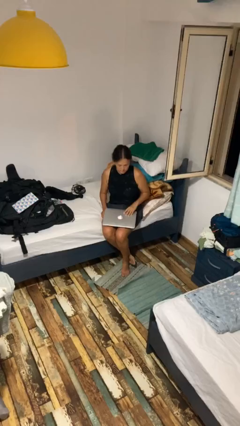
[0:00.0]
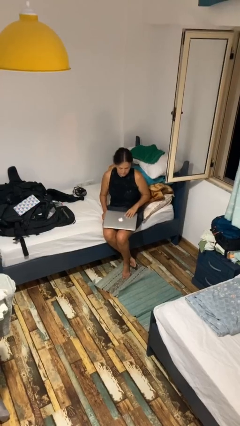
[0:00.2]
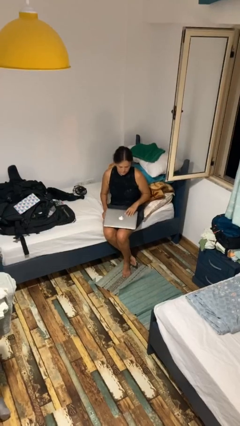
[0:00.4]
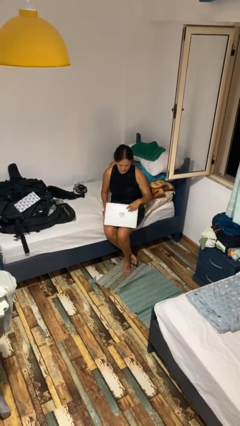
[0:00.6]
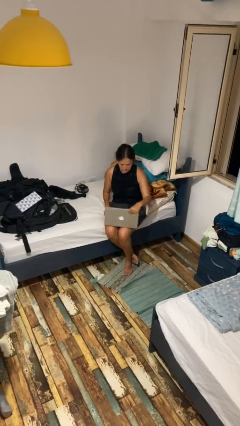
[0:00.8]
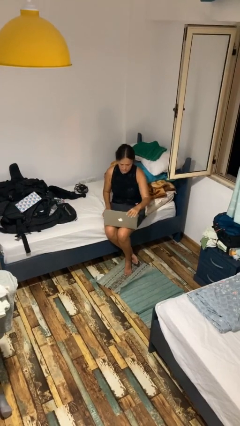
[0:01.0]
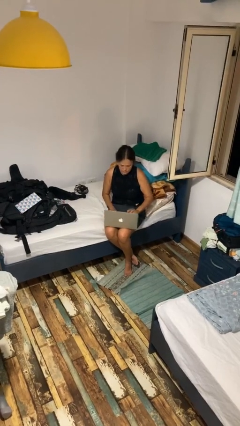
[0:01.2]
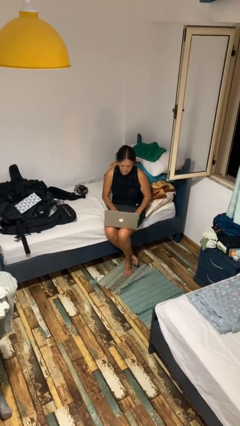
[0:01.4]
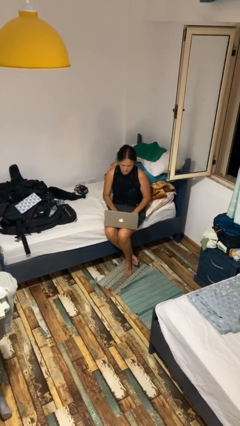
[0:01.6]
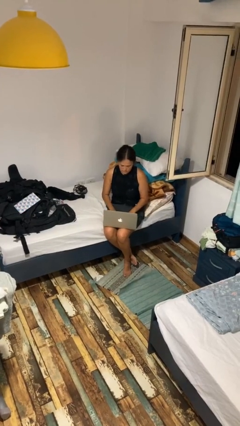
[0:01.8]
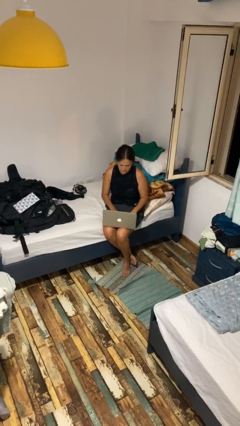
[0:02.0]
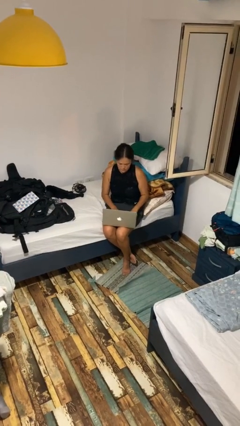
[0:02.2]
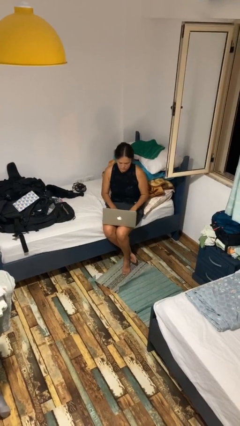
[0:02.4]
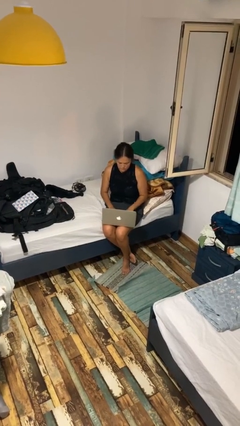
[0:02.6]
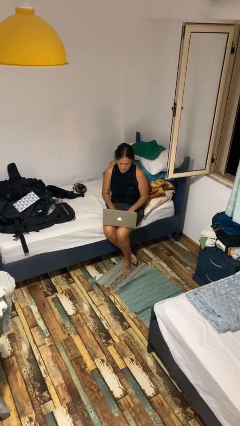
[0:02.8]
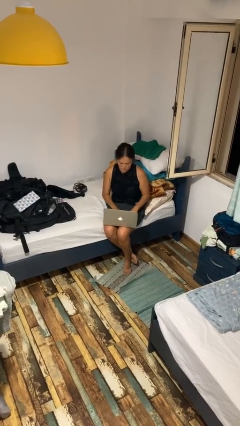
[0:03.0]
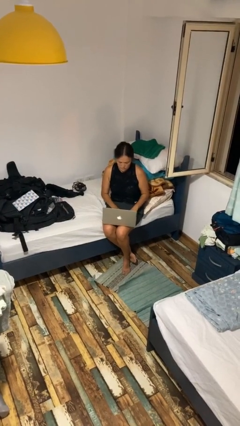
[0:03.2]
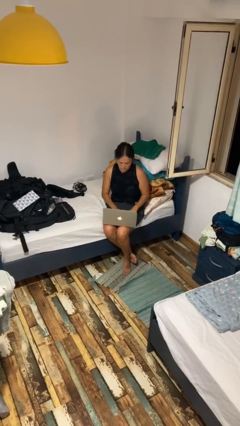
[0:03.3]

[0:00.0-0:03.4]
person opens laptop

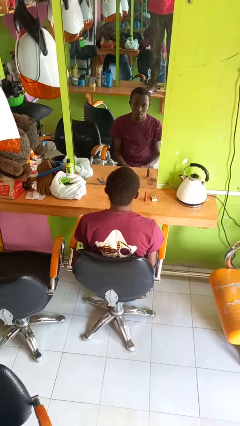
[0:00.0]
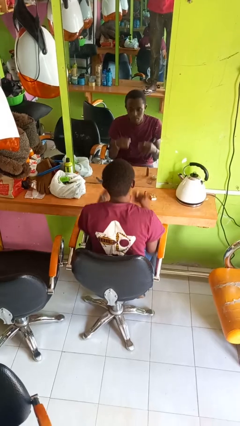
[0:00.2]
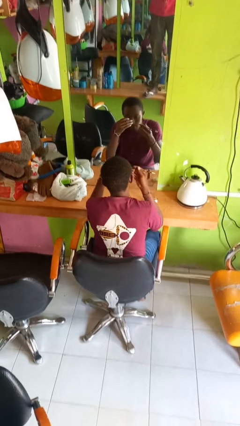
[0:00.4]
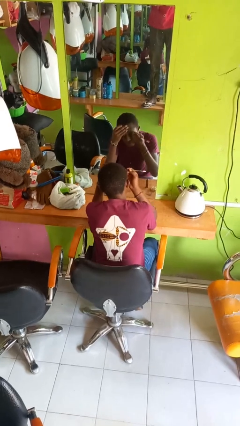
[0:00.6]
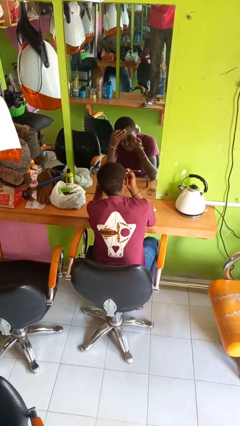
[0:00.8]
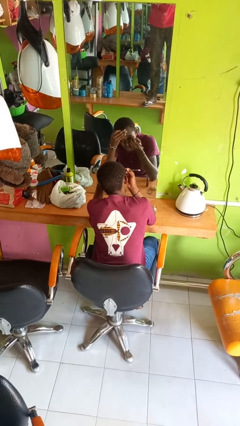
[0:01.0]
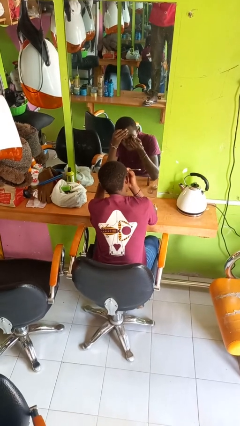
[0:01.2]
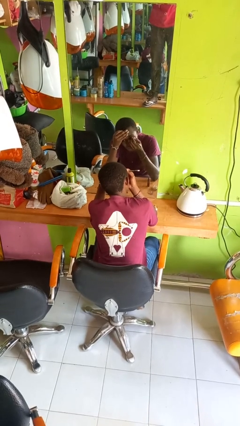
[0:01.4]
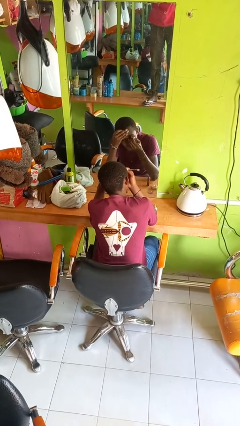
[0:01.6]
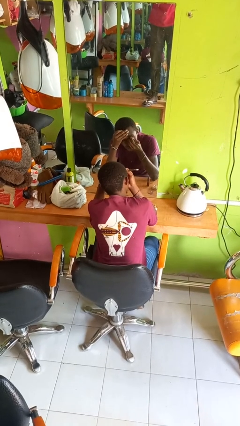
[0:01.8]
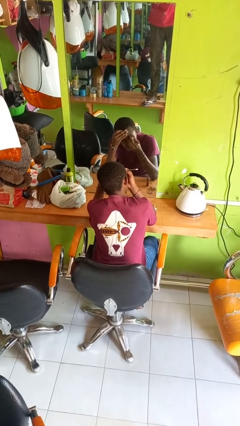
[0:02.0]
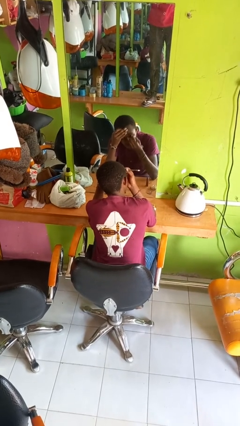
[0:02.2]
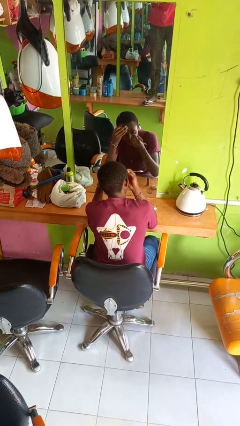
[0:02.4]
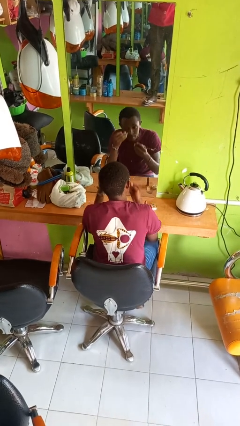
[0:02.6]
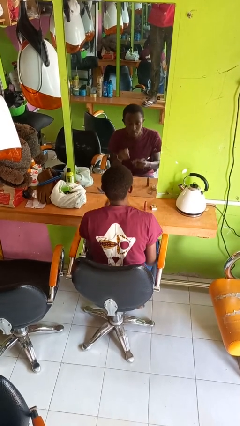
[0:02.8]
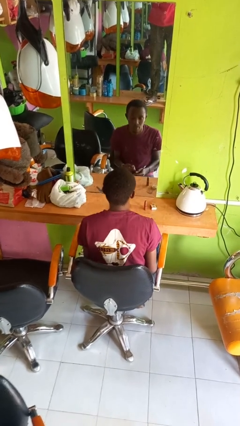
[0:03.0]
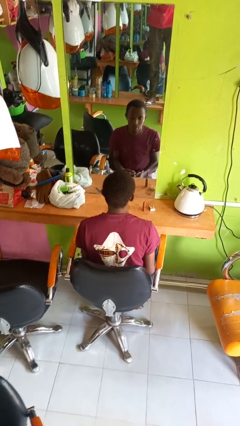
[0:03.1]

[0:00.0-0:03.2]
person applies eye makeup

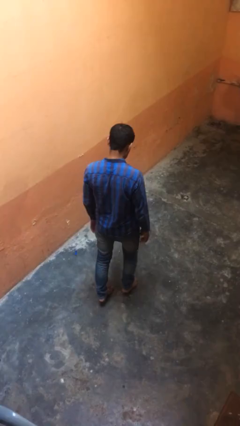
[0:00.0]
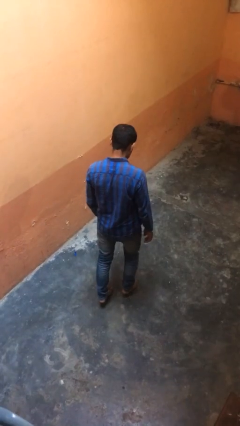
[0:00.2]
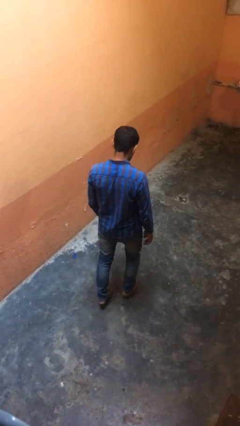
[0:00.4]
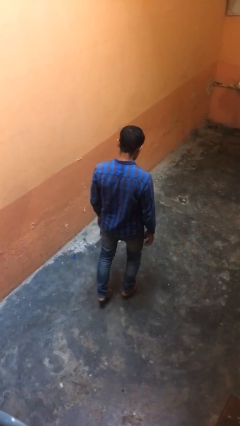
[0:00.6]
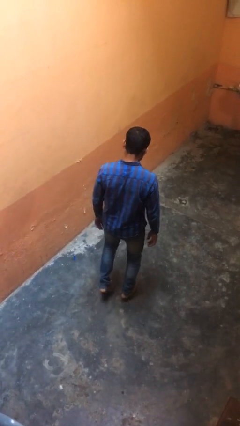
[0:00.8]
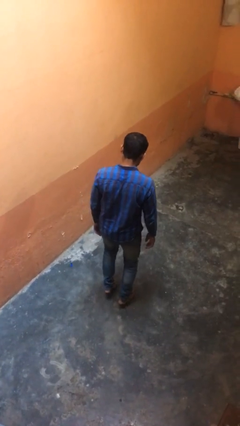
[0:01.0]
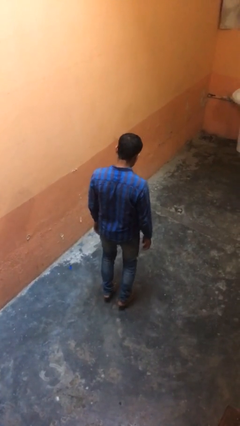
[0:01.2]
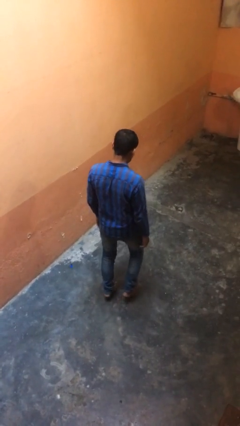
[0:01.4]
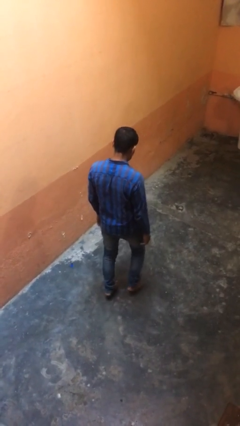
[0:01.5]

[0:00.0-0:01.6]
person walks tiptoe

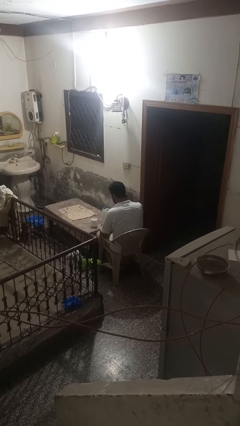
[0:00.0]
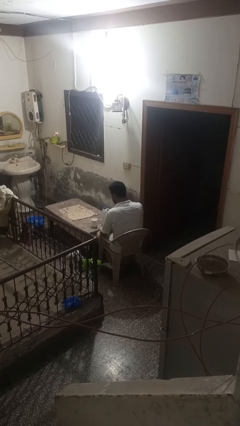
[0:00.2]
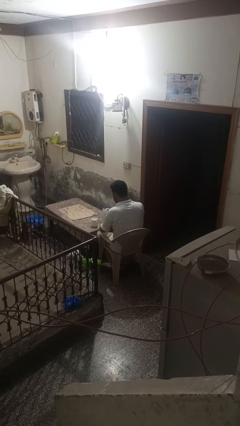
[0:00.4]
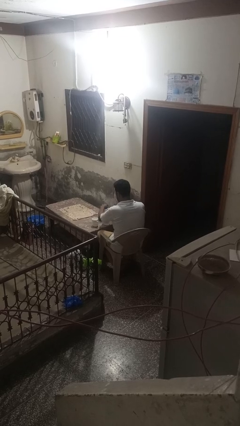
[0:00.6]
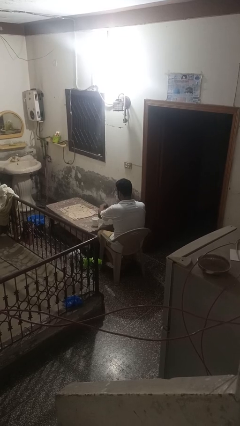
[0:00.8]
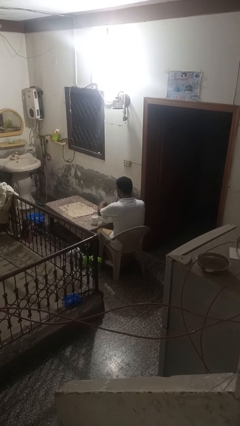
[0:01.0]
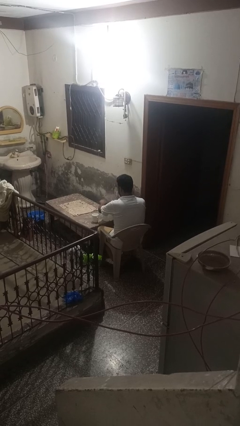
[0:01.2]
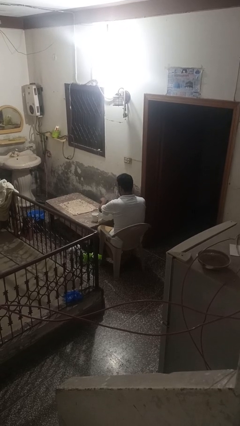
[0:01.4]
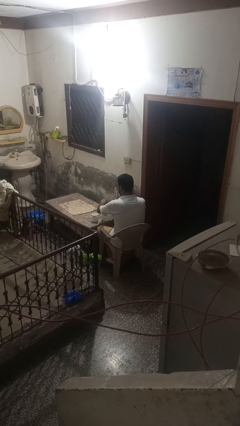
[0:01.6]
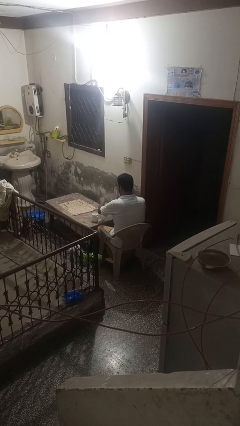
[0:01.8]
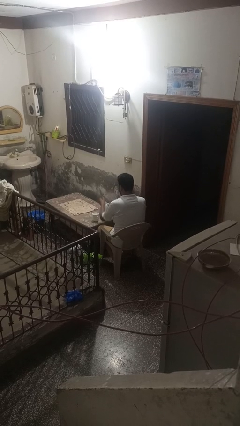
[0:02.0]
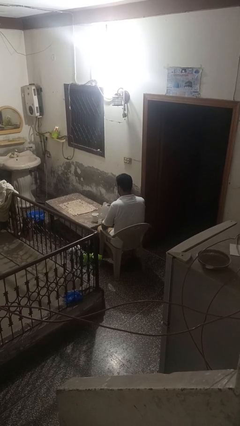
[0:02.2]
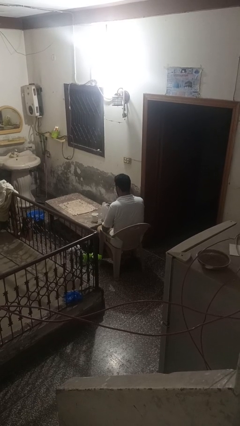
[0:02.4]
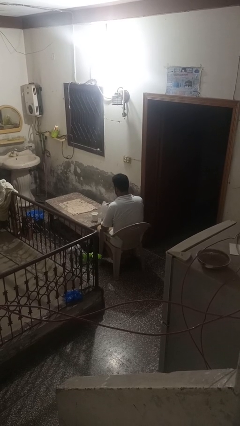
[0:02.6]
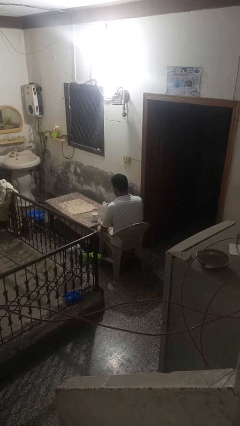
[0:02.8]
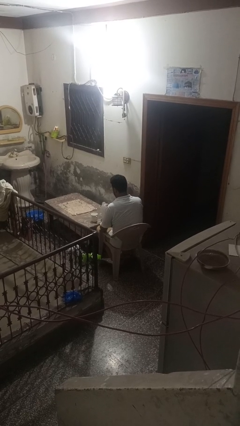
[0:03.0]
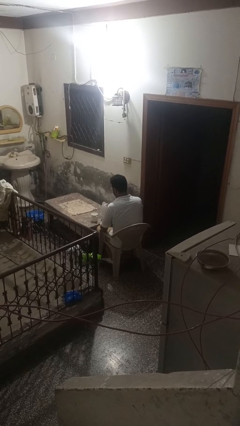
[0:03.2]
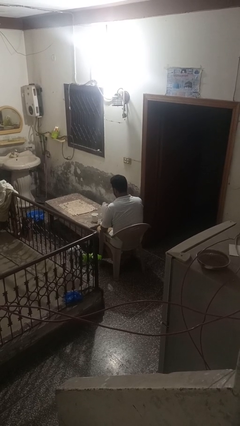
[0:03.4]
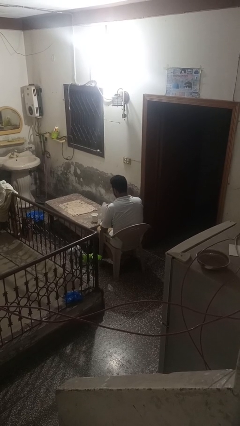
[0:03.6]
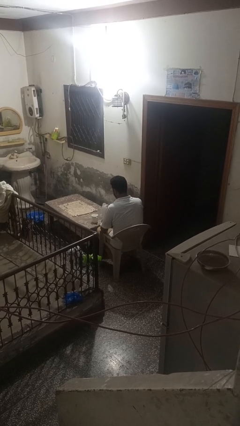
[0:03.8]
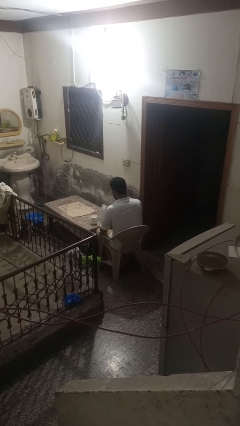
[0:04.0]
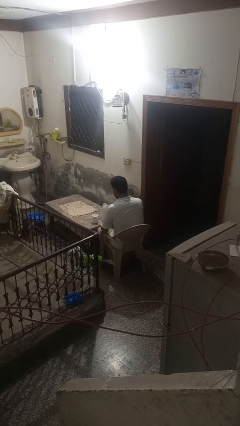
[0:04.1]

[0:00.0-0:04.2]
person unscrews lid from bottle

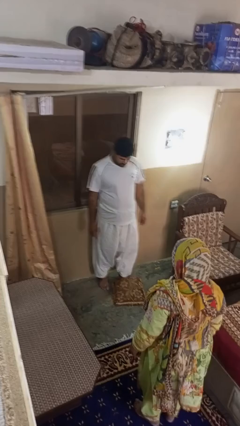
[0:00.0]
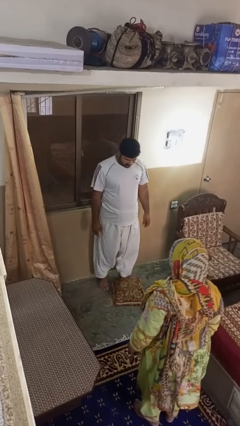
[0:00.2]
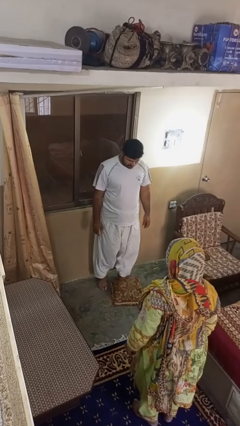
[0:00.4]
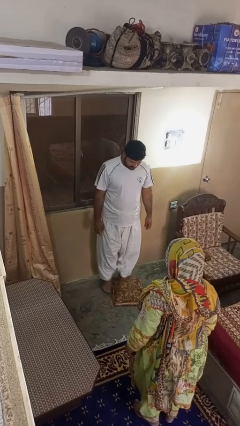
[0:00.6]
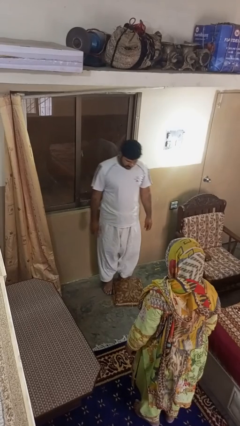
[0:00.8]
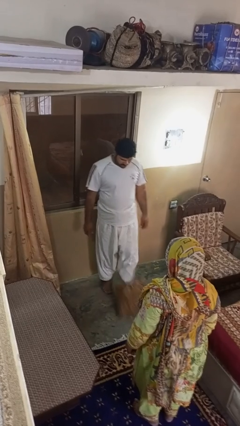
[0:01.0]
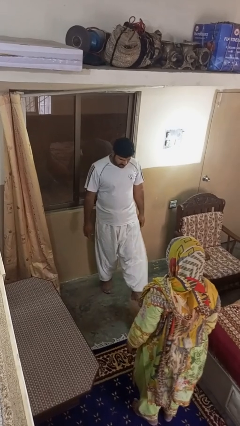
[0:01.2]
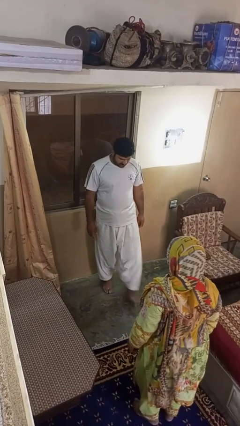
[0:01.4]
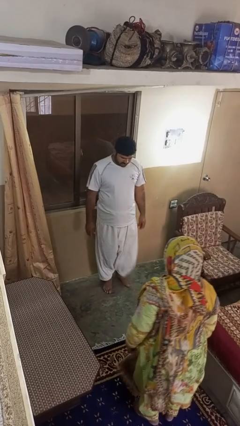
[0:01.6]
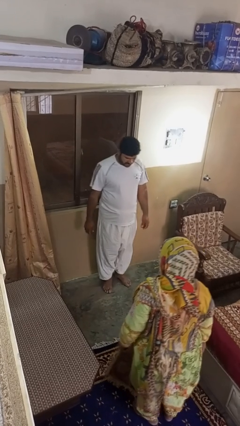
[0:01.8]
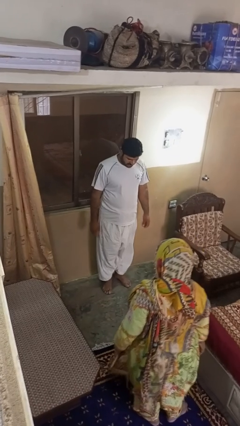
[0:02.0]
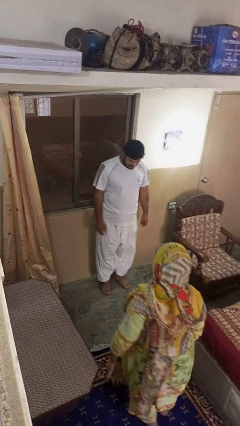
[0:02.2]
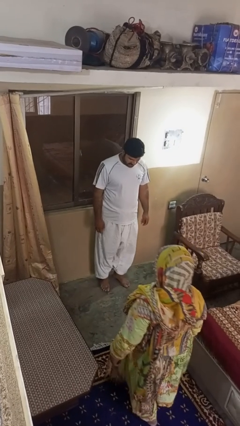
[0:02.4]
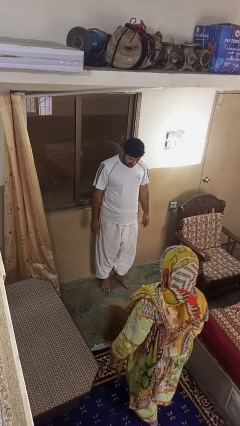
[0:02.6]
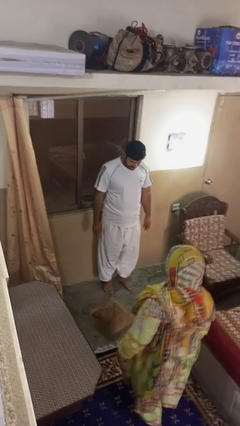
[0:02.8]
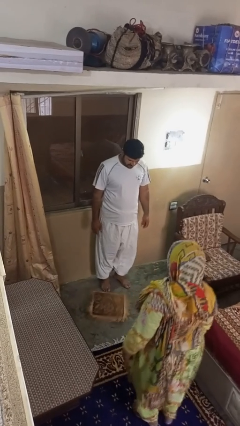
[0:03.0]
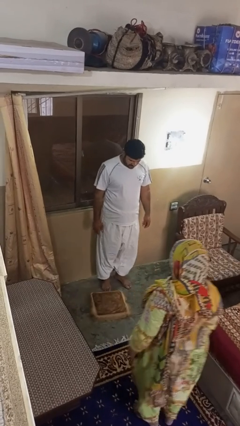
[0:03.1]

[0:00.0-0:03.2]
person kicks object to person

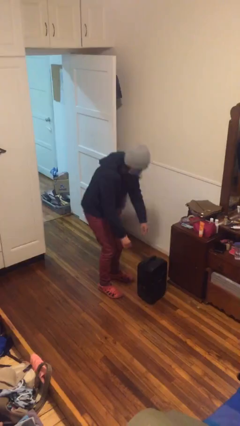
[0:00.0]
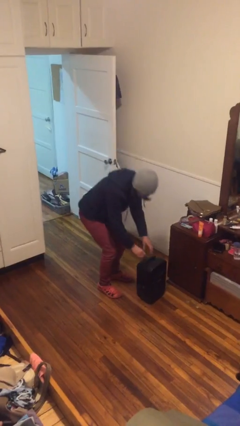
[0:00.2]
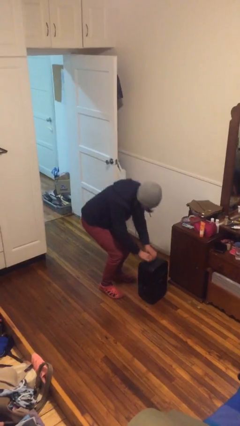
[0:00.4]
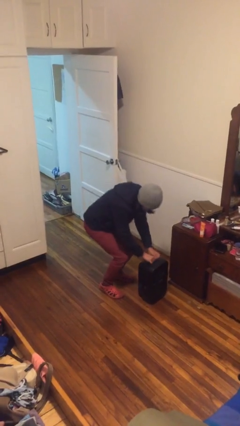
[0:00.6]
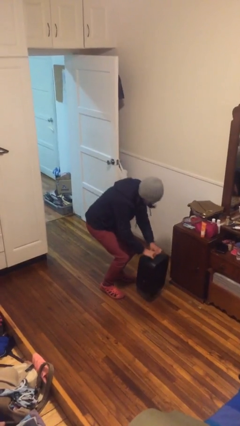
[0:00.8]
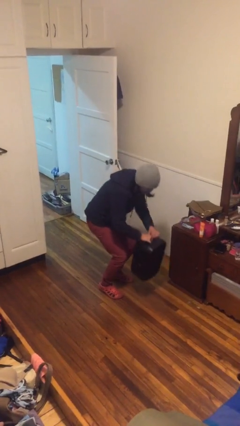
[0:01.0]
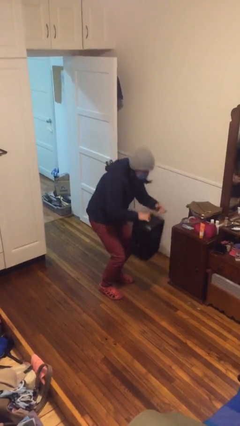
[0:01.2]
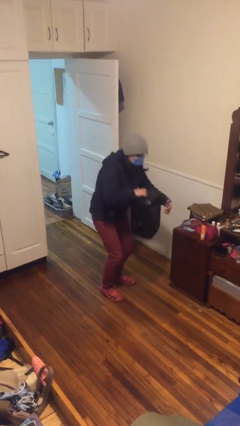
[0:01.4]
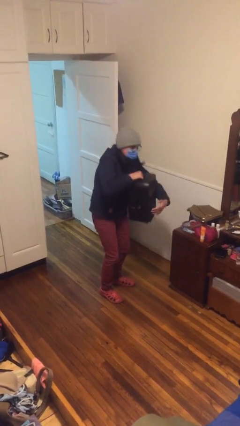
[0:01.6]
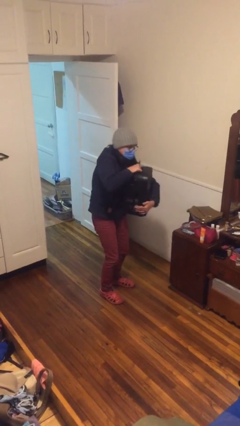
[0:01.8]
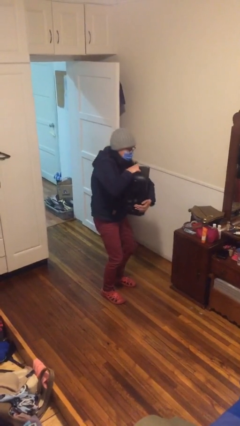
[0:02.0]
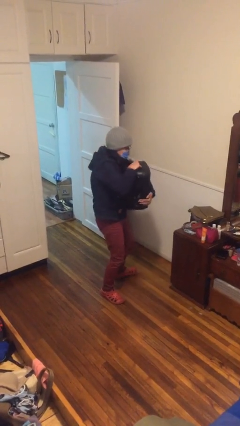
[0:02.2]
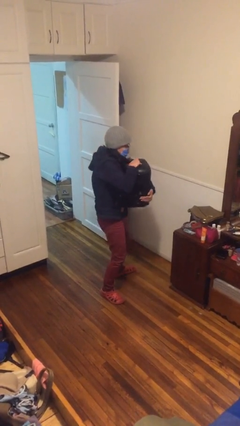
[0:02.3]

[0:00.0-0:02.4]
person picks up object from floor
